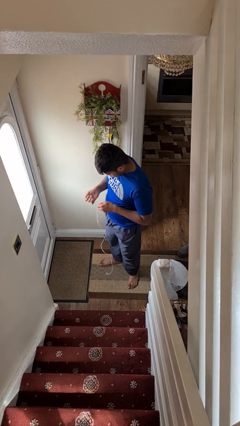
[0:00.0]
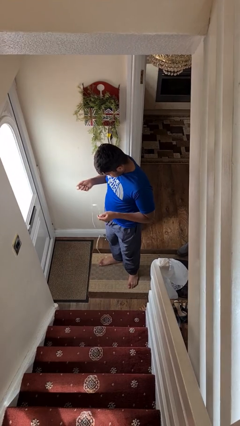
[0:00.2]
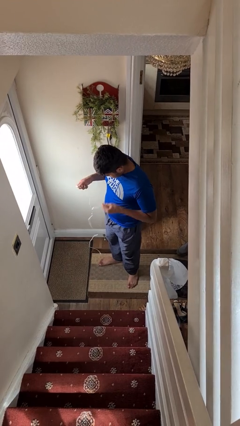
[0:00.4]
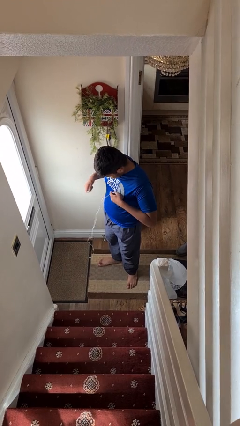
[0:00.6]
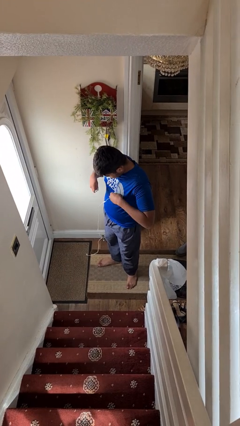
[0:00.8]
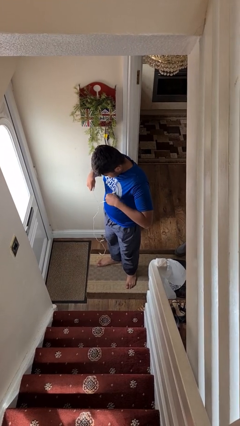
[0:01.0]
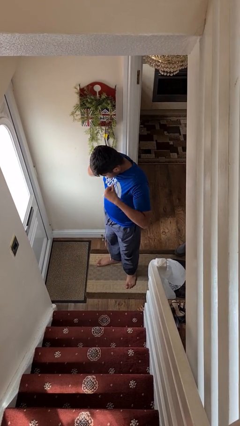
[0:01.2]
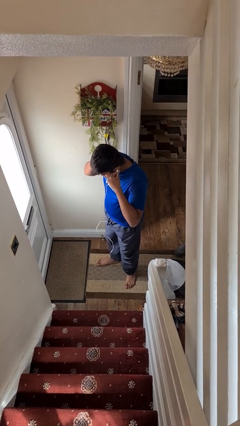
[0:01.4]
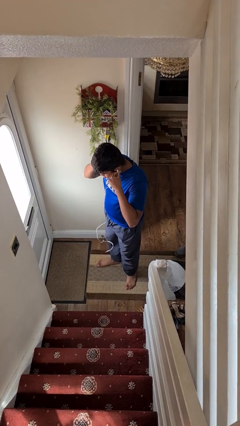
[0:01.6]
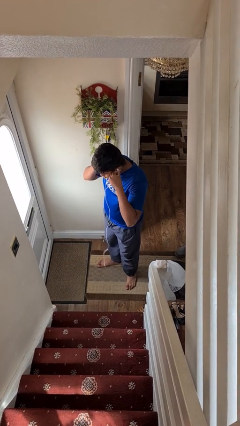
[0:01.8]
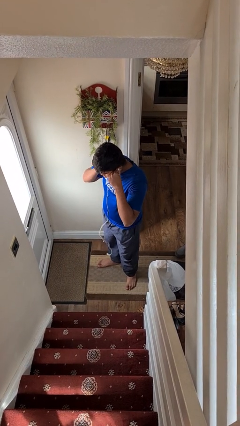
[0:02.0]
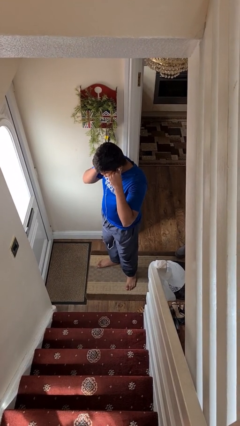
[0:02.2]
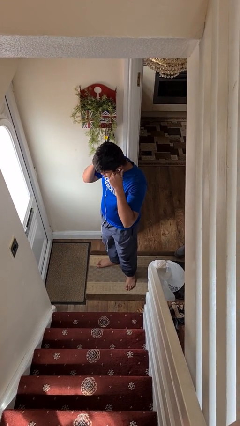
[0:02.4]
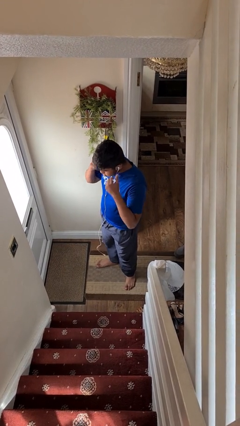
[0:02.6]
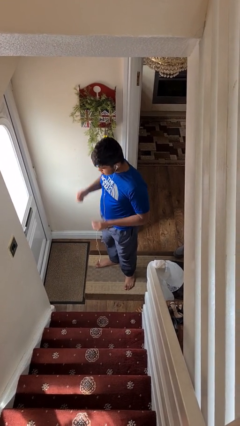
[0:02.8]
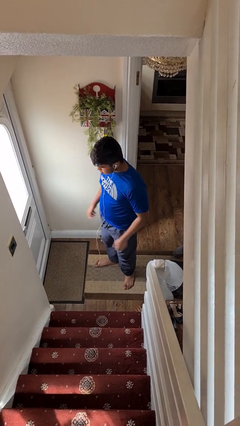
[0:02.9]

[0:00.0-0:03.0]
person puts on headphones

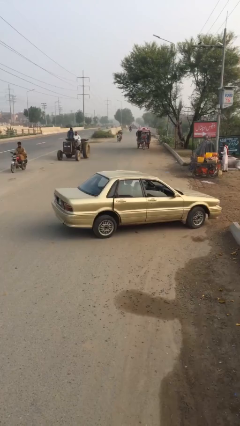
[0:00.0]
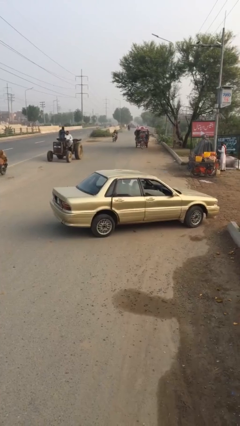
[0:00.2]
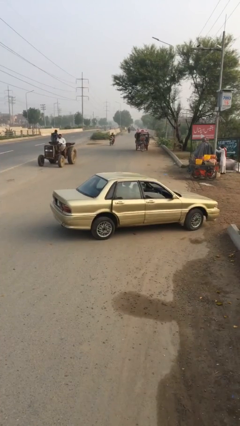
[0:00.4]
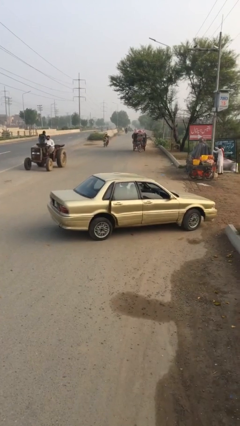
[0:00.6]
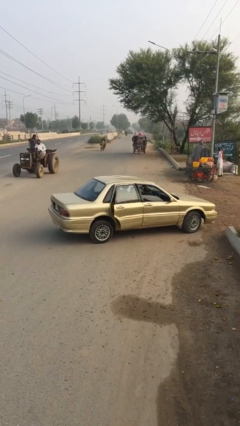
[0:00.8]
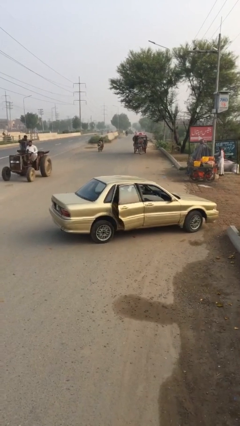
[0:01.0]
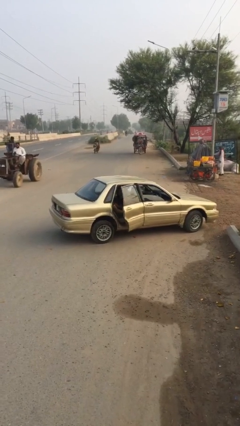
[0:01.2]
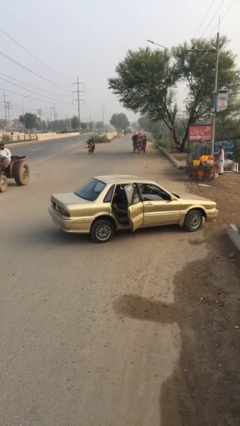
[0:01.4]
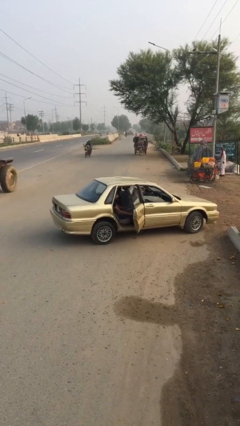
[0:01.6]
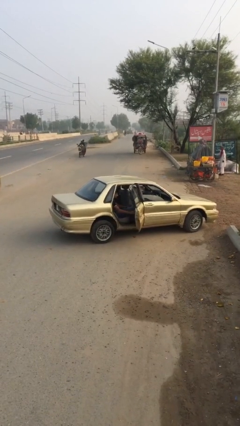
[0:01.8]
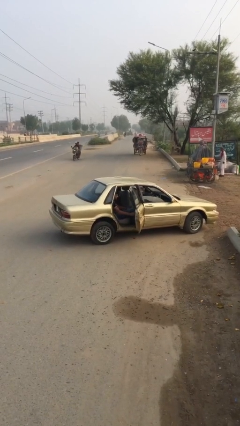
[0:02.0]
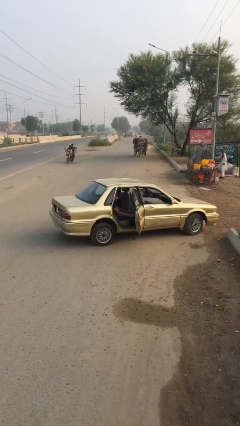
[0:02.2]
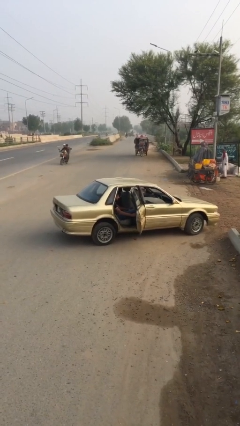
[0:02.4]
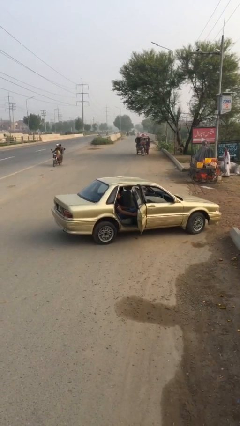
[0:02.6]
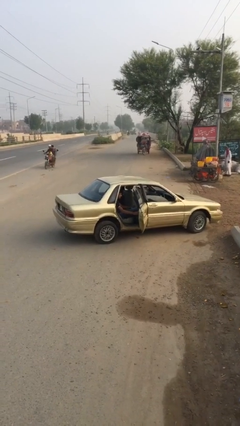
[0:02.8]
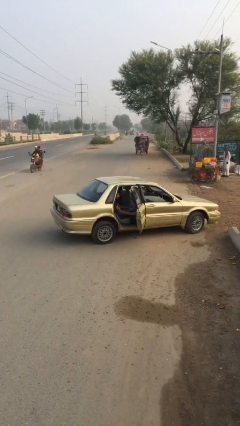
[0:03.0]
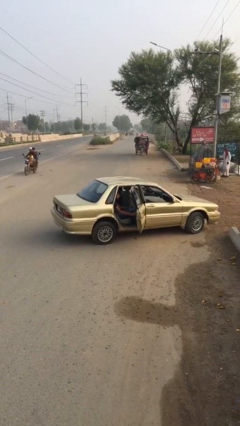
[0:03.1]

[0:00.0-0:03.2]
person opens car door

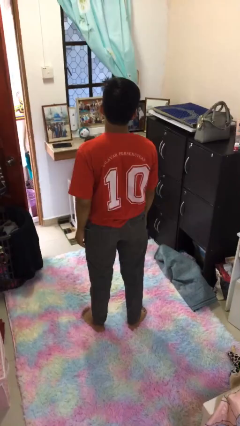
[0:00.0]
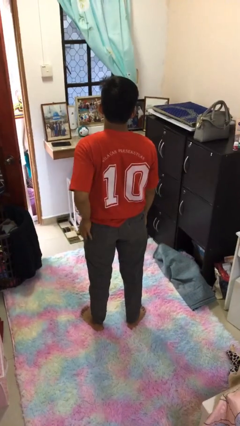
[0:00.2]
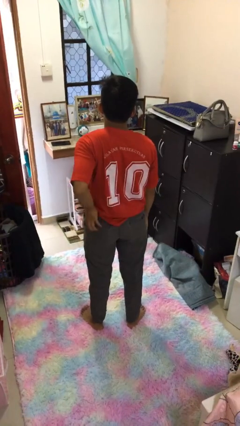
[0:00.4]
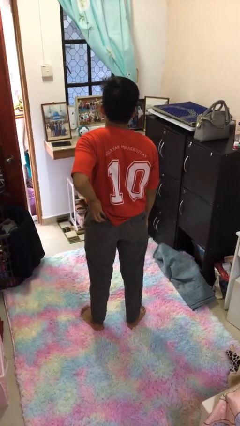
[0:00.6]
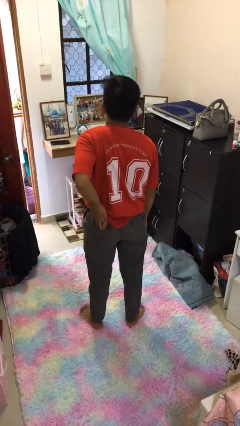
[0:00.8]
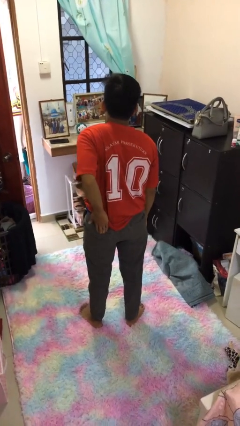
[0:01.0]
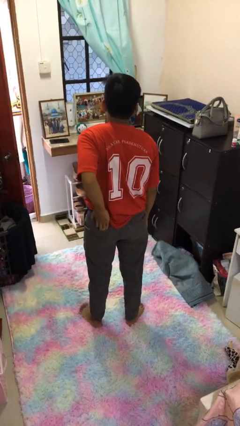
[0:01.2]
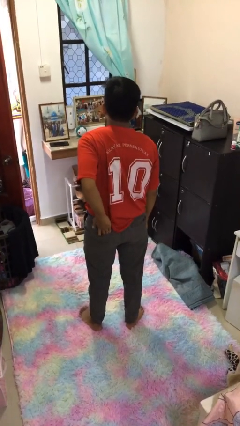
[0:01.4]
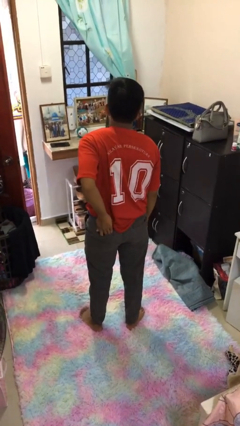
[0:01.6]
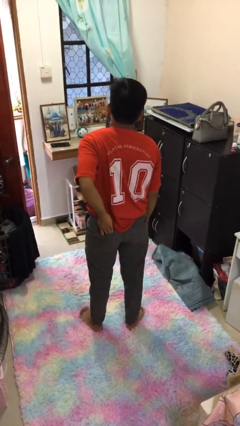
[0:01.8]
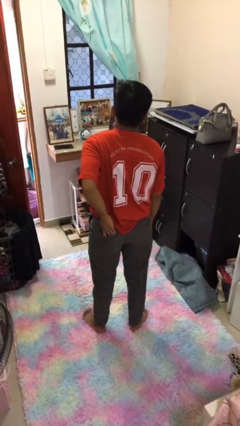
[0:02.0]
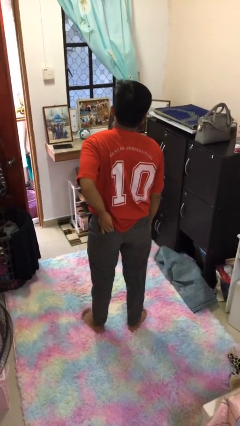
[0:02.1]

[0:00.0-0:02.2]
person puts hands in back pockets

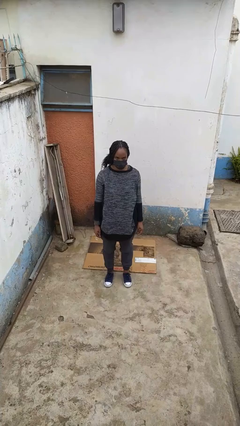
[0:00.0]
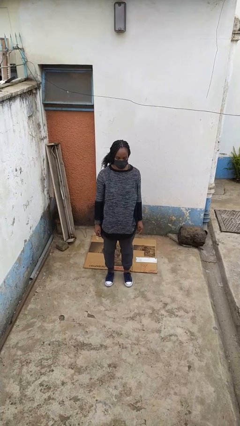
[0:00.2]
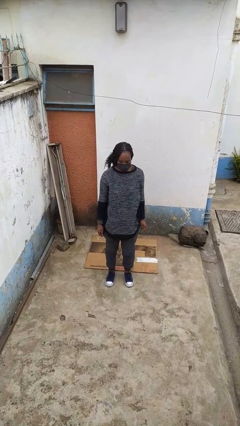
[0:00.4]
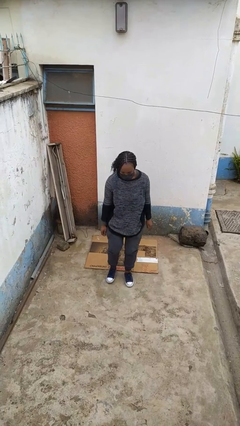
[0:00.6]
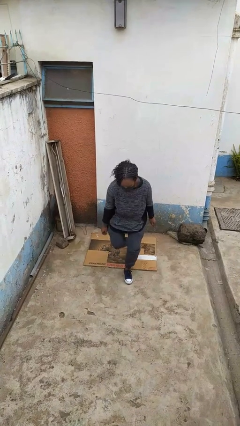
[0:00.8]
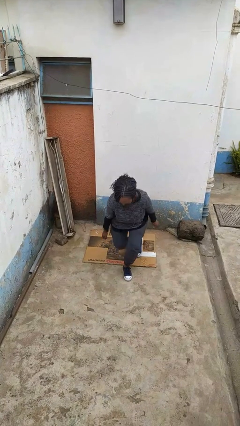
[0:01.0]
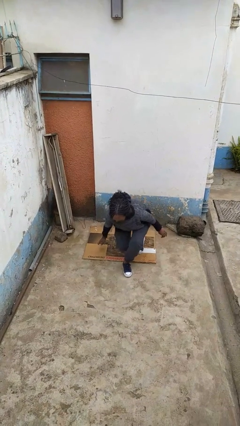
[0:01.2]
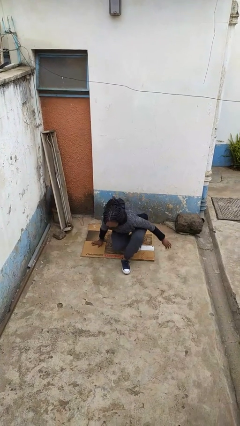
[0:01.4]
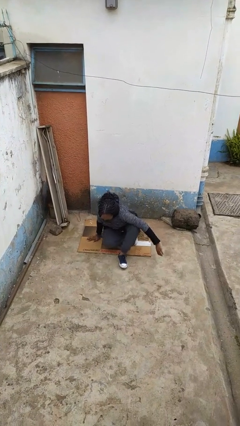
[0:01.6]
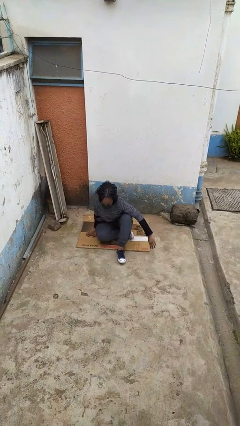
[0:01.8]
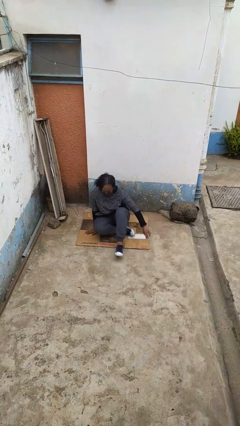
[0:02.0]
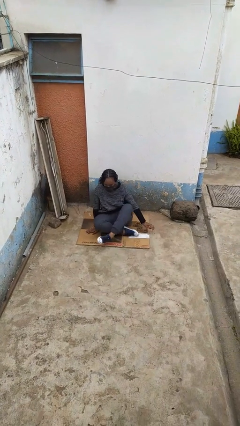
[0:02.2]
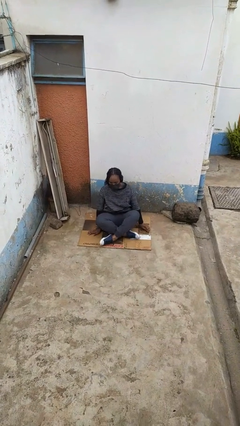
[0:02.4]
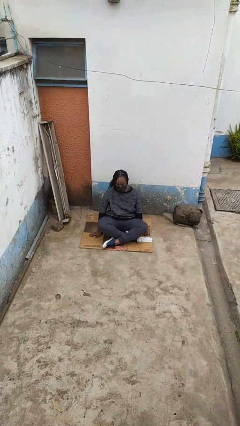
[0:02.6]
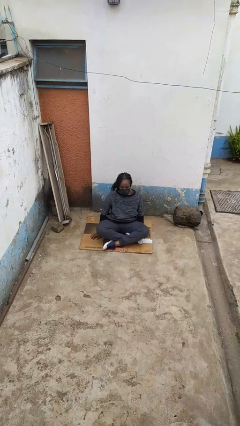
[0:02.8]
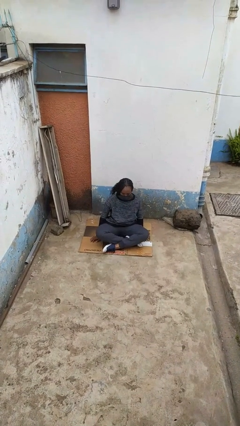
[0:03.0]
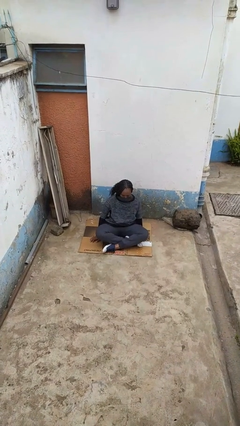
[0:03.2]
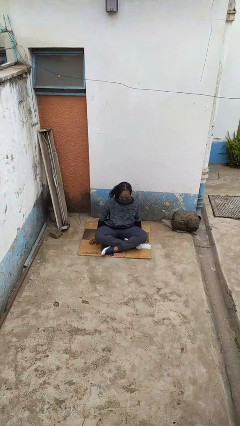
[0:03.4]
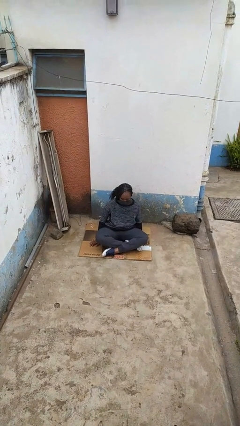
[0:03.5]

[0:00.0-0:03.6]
person sits crisscross

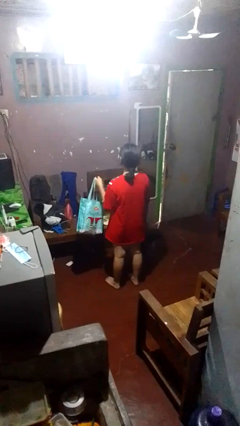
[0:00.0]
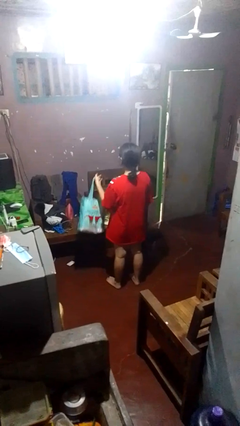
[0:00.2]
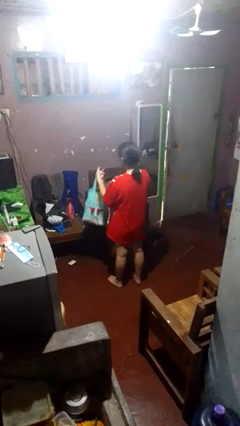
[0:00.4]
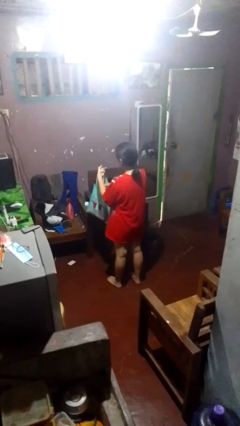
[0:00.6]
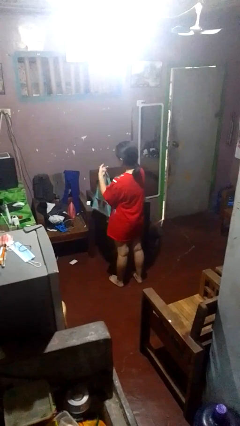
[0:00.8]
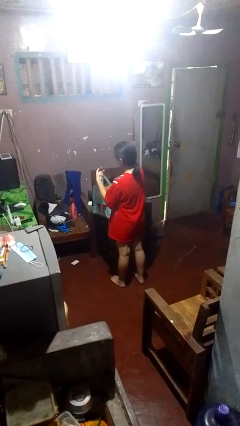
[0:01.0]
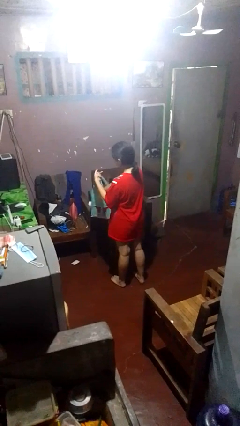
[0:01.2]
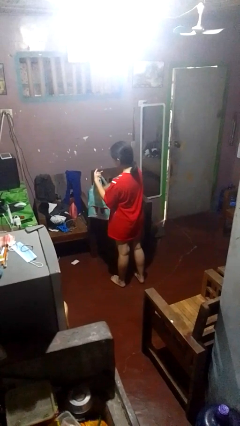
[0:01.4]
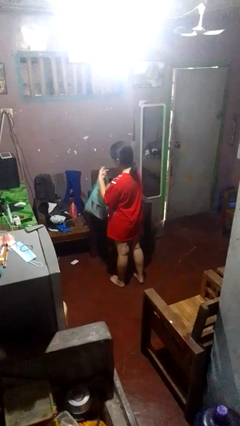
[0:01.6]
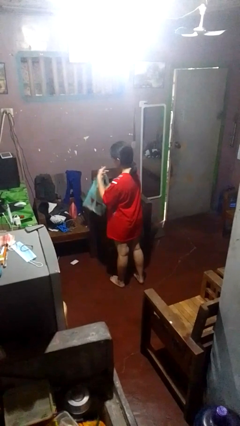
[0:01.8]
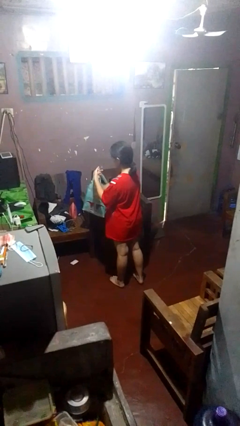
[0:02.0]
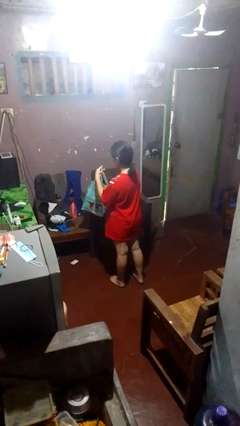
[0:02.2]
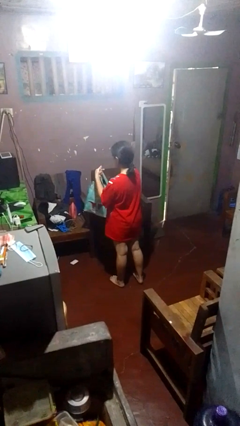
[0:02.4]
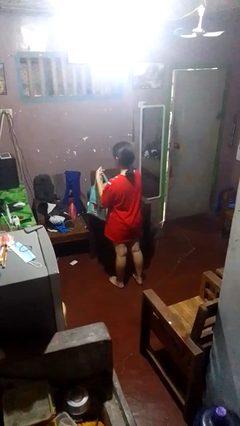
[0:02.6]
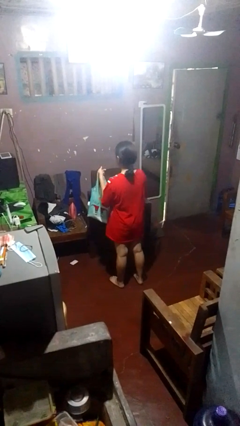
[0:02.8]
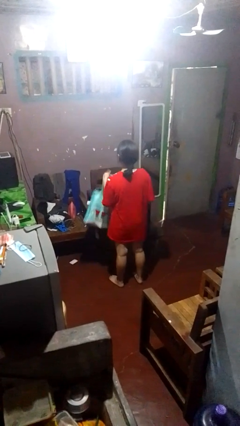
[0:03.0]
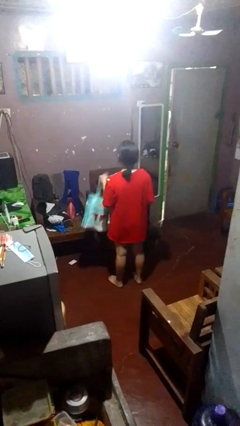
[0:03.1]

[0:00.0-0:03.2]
person searches in bag

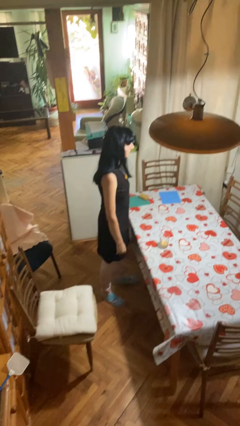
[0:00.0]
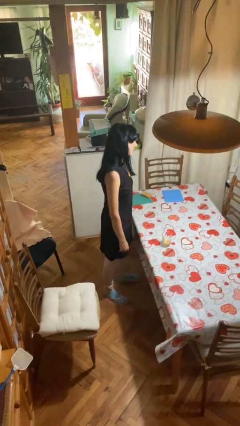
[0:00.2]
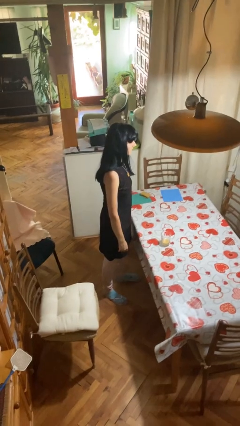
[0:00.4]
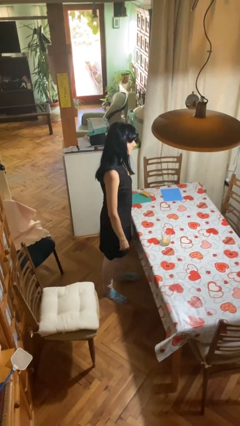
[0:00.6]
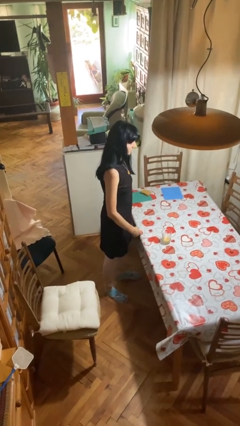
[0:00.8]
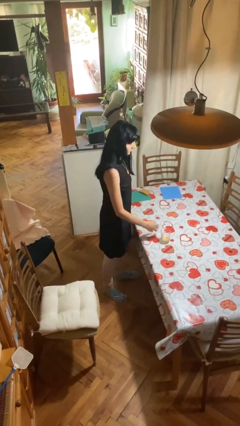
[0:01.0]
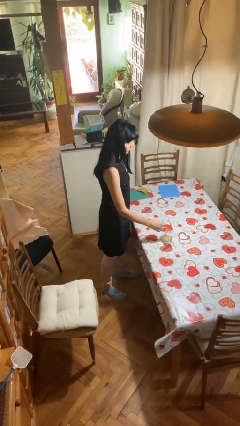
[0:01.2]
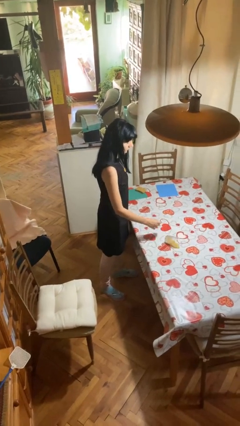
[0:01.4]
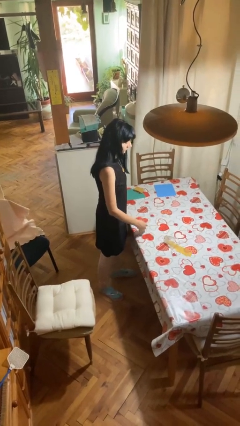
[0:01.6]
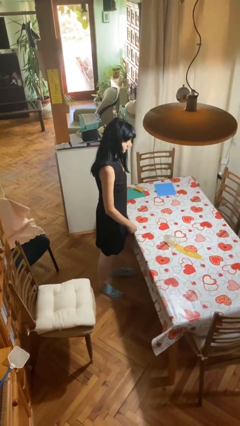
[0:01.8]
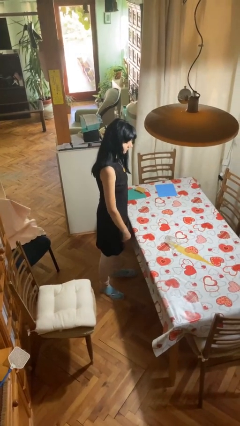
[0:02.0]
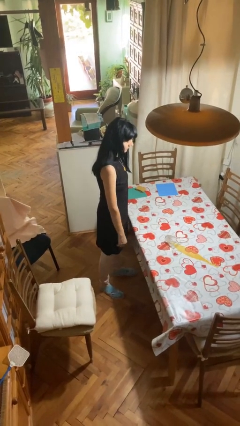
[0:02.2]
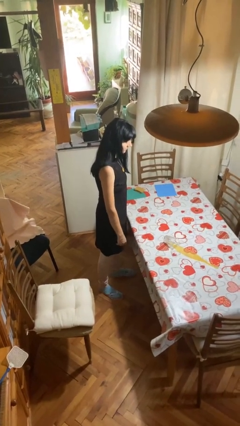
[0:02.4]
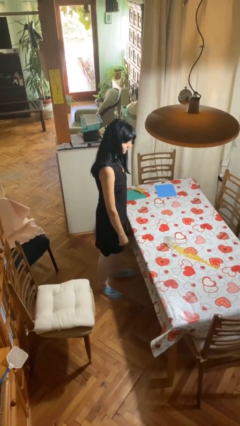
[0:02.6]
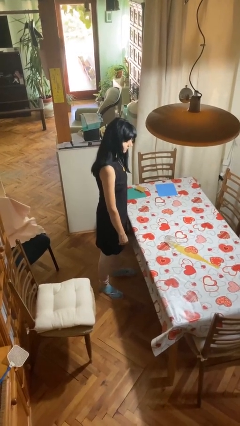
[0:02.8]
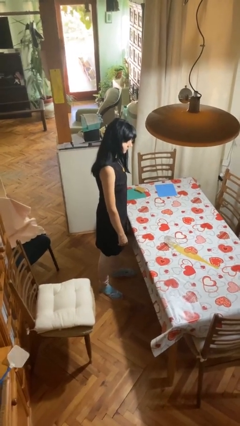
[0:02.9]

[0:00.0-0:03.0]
person spills on table
